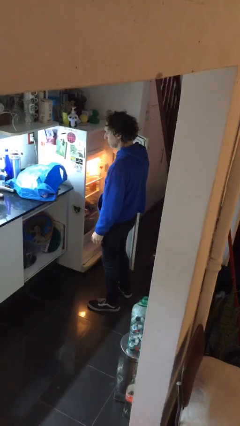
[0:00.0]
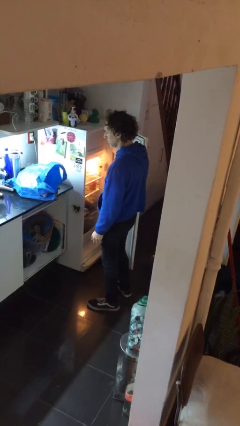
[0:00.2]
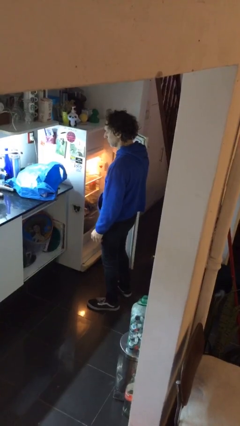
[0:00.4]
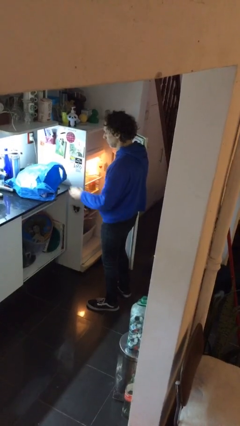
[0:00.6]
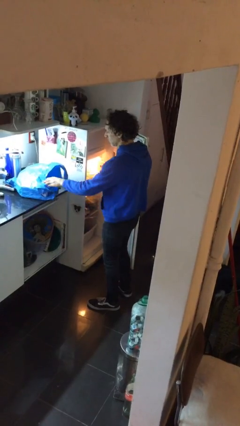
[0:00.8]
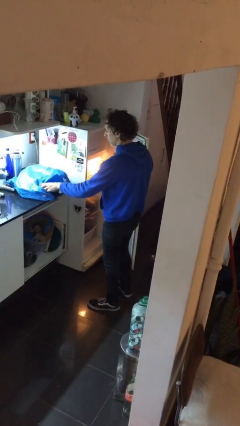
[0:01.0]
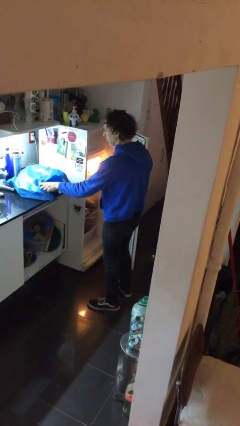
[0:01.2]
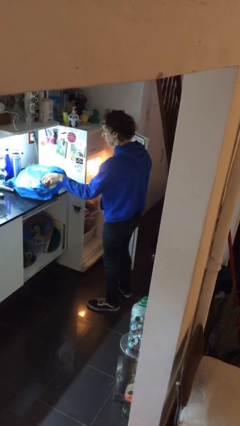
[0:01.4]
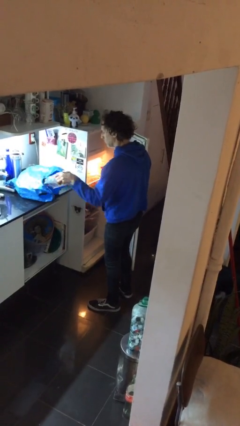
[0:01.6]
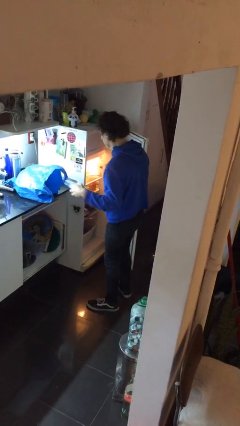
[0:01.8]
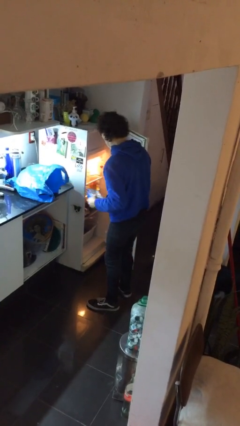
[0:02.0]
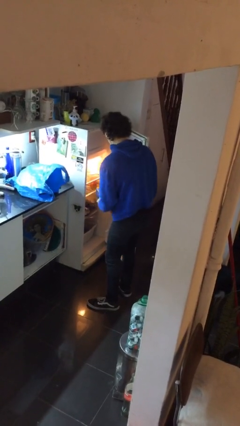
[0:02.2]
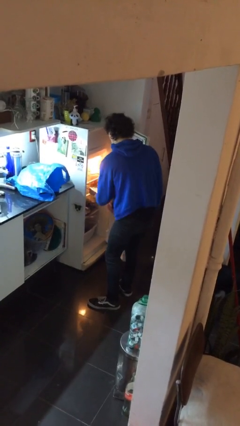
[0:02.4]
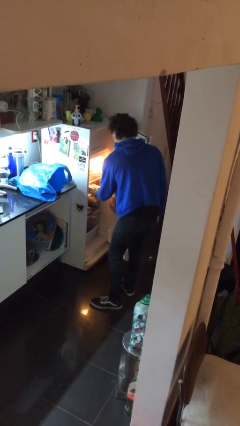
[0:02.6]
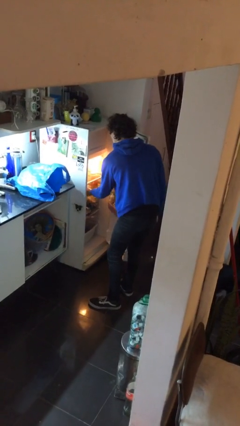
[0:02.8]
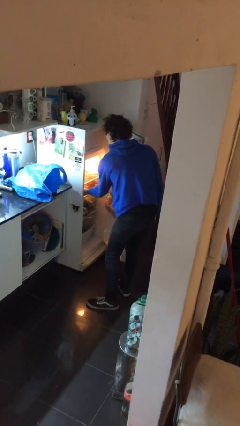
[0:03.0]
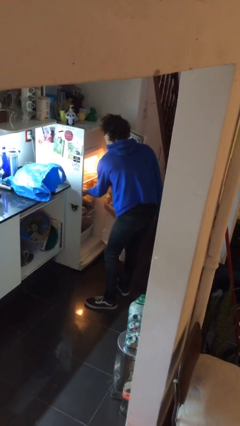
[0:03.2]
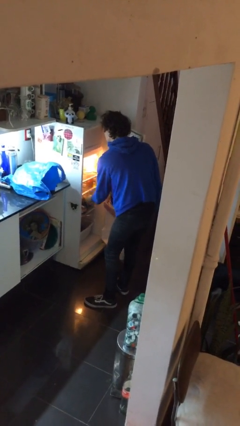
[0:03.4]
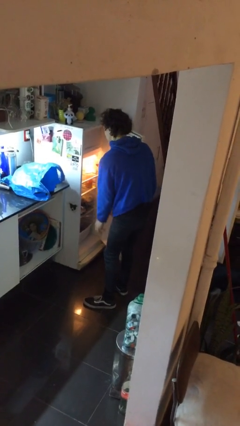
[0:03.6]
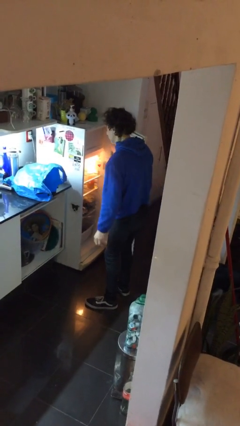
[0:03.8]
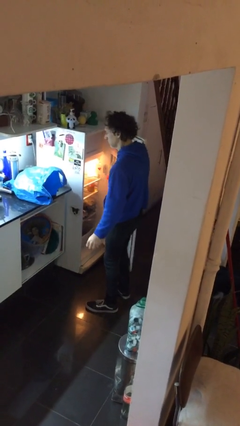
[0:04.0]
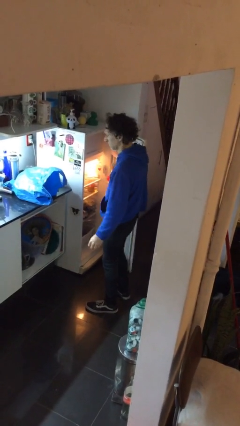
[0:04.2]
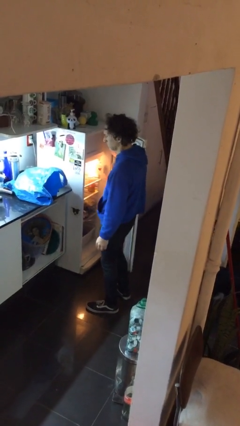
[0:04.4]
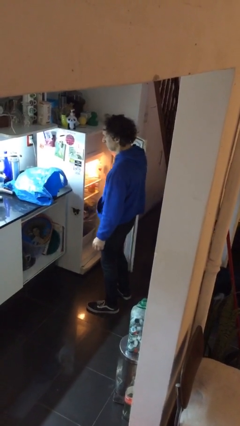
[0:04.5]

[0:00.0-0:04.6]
person loads groceries into refrigerator

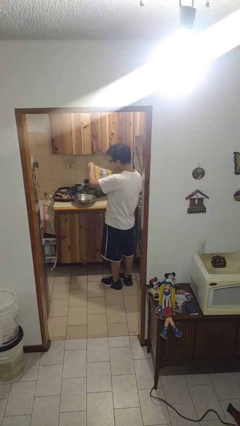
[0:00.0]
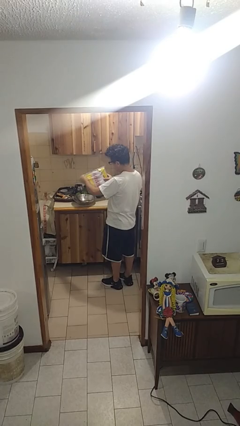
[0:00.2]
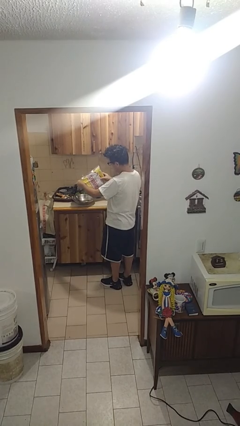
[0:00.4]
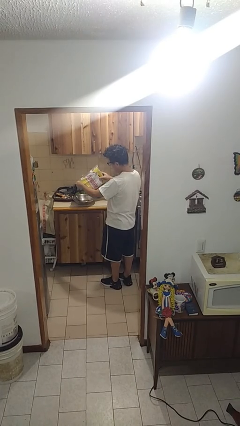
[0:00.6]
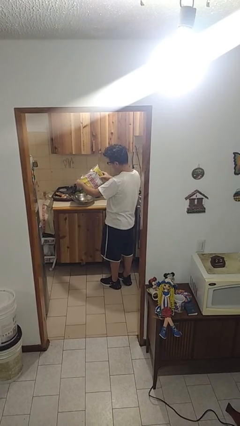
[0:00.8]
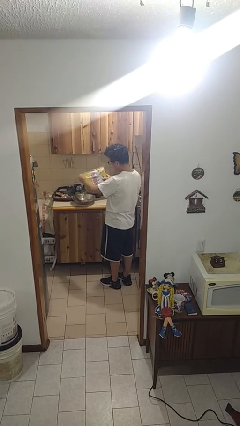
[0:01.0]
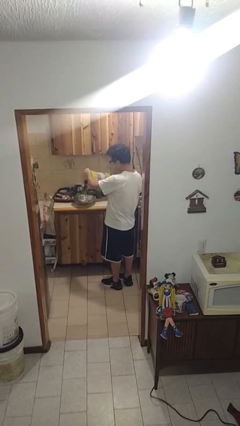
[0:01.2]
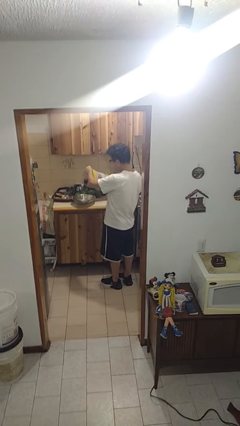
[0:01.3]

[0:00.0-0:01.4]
person pours into bowl

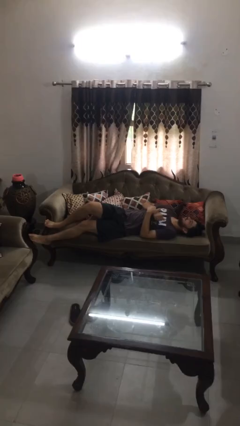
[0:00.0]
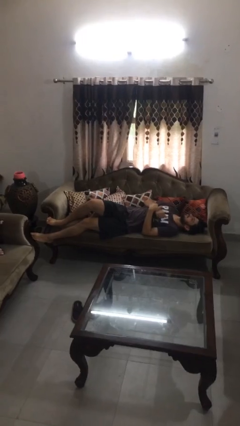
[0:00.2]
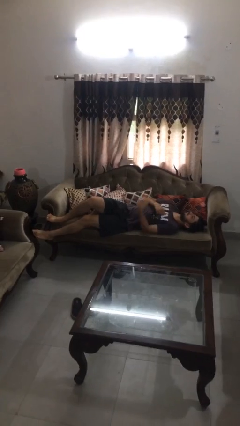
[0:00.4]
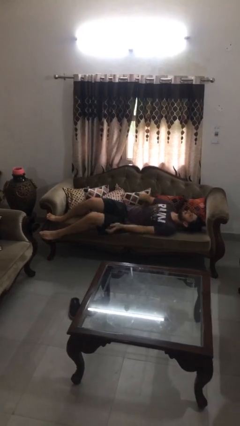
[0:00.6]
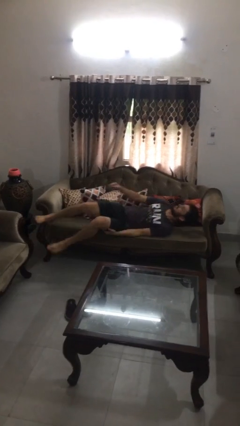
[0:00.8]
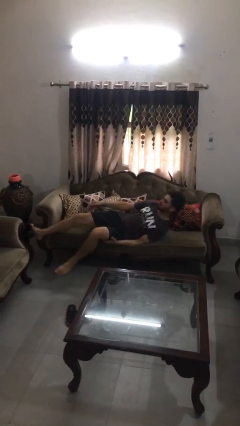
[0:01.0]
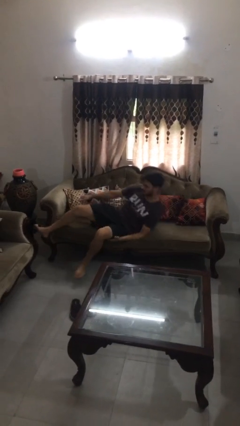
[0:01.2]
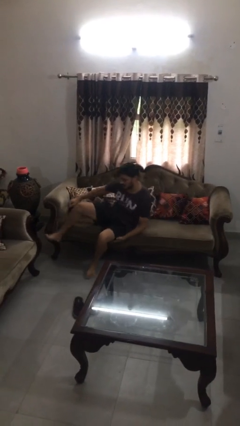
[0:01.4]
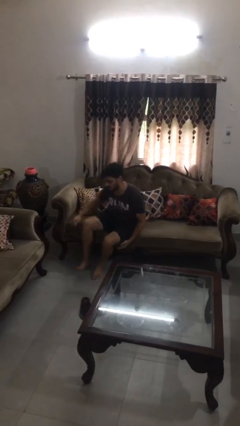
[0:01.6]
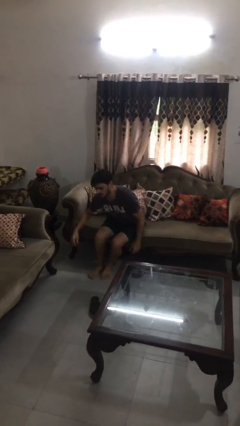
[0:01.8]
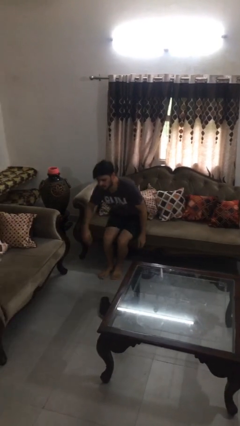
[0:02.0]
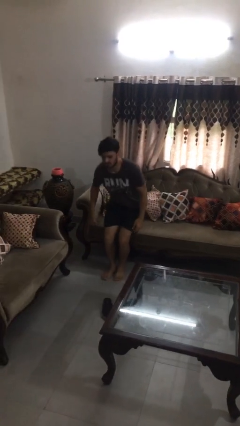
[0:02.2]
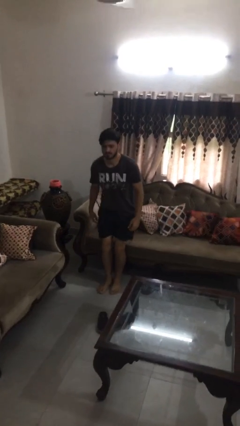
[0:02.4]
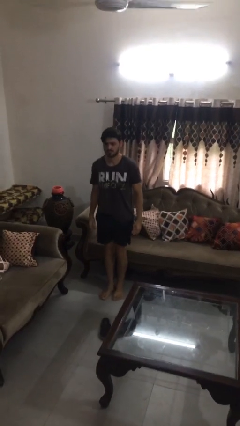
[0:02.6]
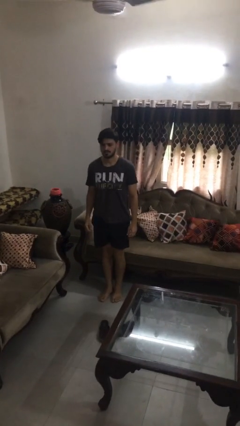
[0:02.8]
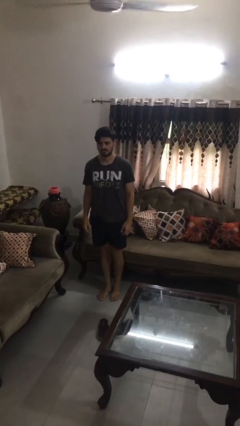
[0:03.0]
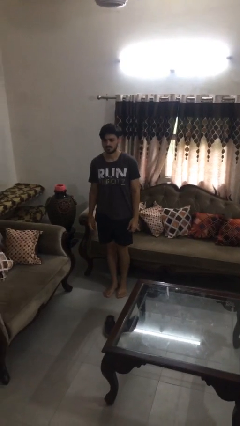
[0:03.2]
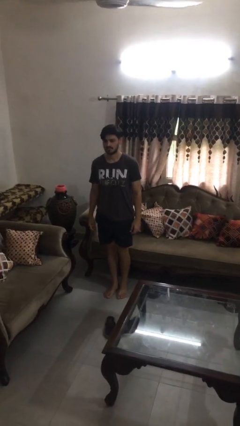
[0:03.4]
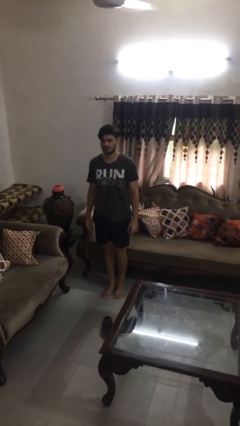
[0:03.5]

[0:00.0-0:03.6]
person stands up

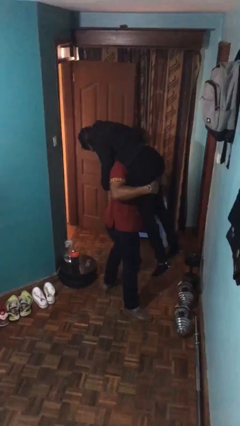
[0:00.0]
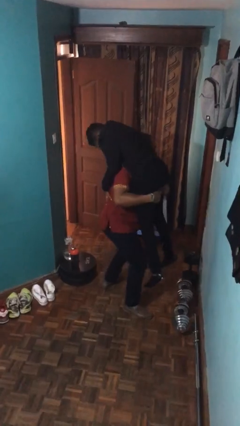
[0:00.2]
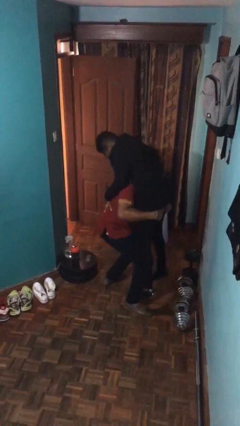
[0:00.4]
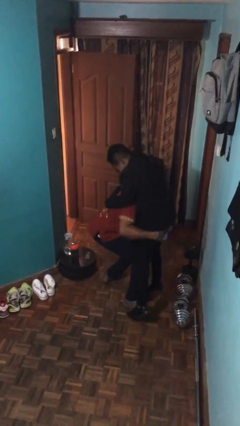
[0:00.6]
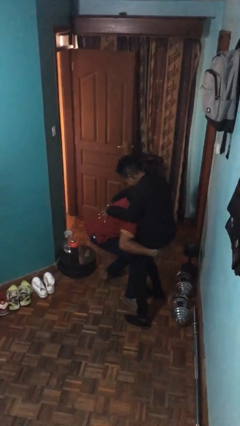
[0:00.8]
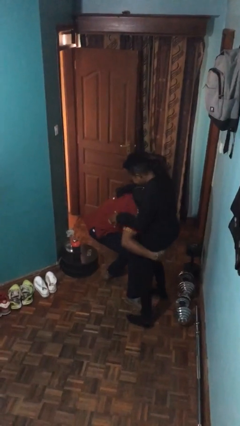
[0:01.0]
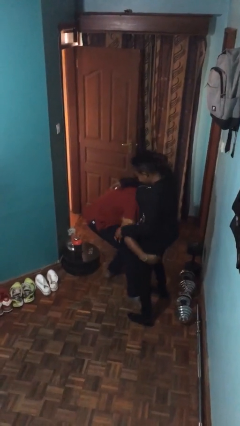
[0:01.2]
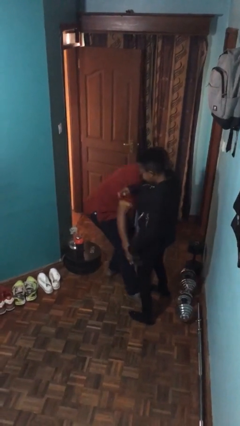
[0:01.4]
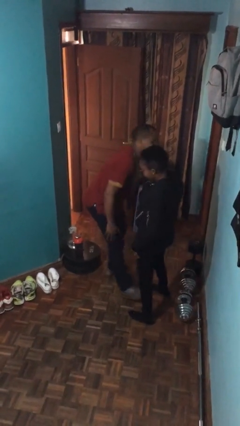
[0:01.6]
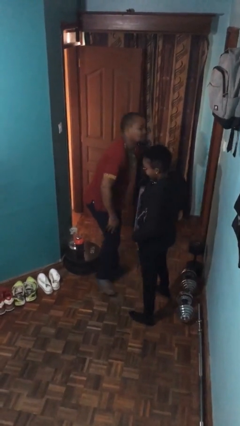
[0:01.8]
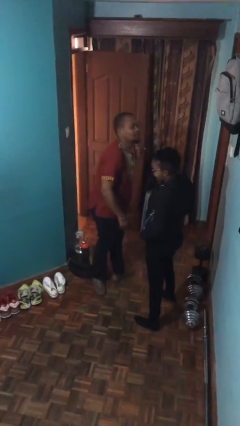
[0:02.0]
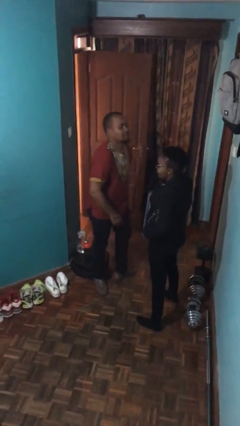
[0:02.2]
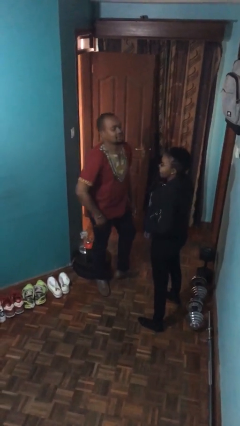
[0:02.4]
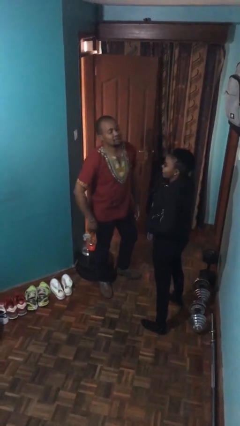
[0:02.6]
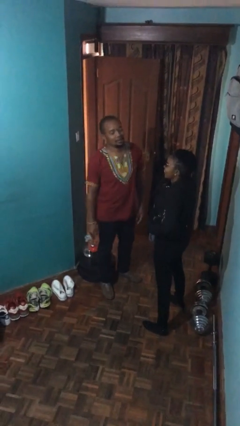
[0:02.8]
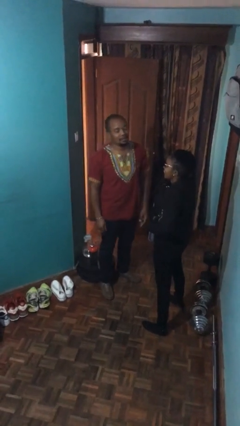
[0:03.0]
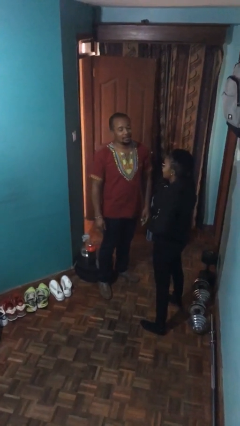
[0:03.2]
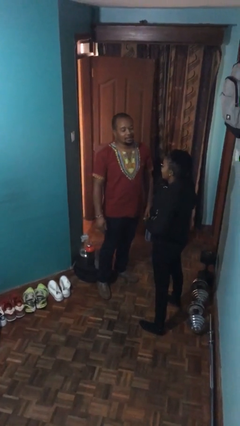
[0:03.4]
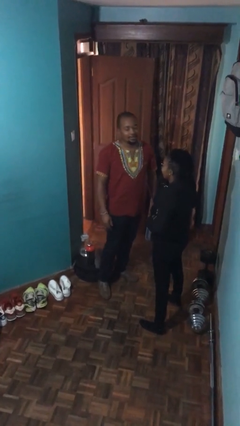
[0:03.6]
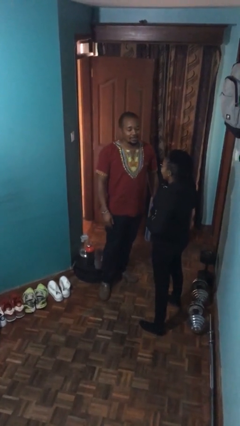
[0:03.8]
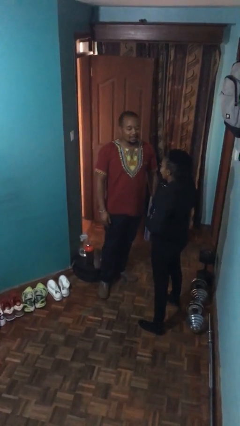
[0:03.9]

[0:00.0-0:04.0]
person puts down person

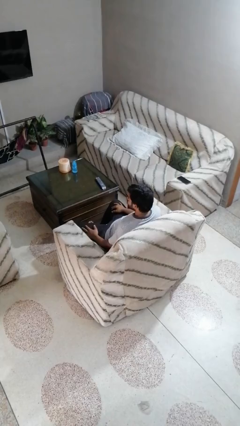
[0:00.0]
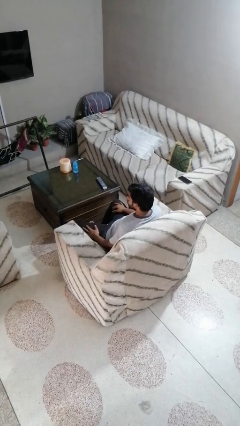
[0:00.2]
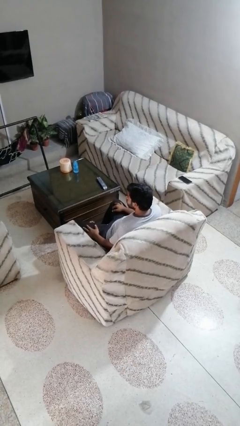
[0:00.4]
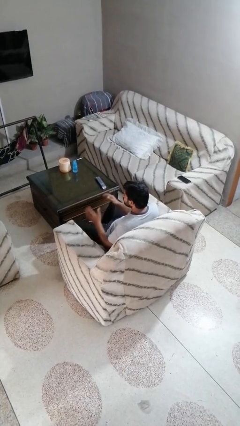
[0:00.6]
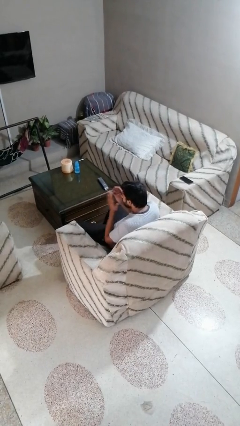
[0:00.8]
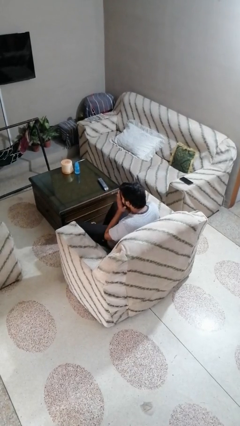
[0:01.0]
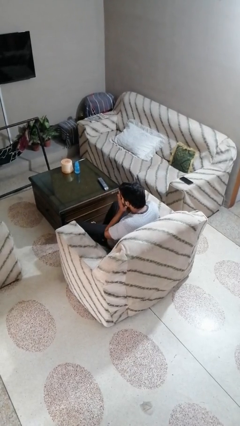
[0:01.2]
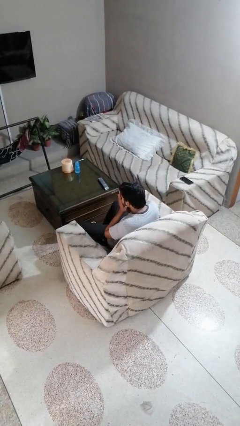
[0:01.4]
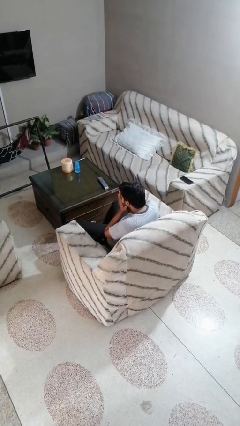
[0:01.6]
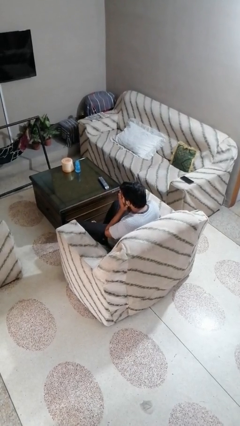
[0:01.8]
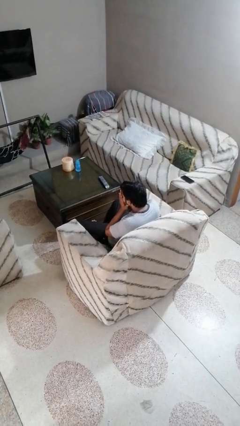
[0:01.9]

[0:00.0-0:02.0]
person covers face with hands

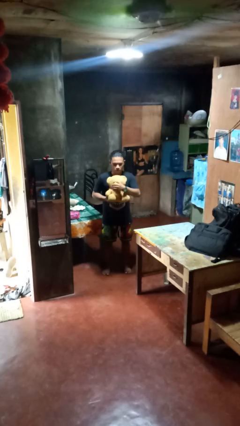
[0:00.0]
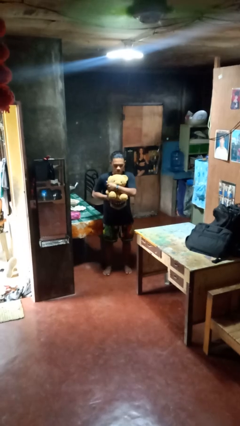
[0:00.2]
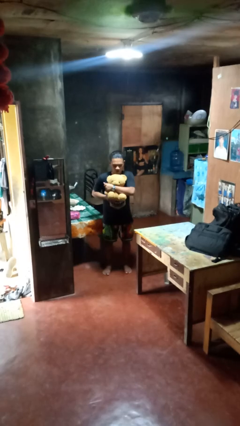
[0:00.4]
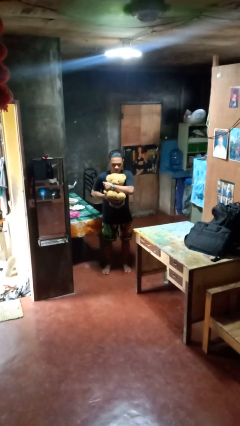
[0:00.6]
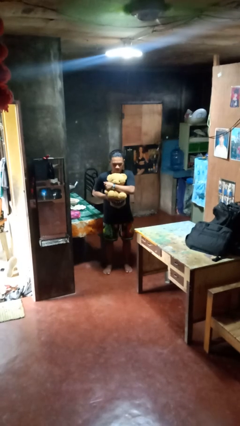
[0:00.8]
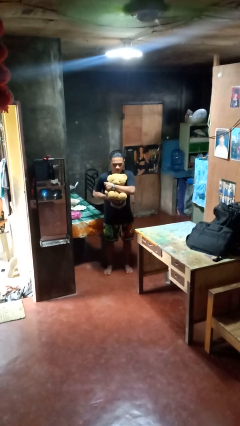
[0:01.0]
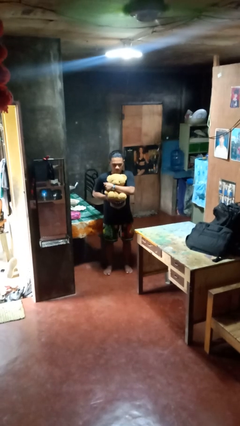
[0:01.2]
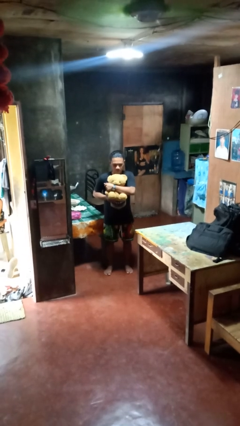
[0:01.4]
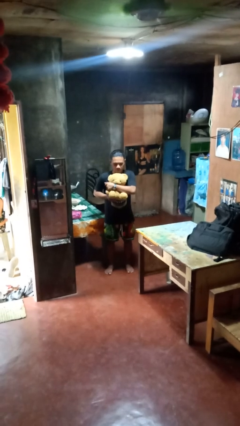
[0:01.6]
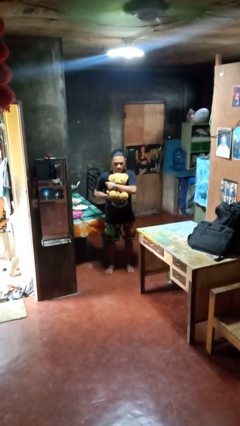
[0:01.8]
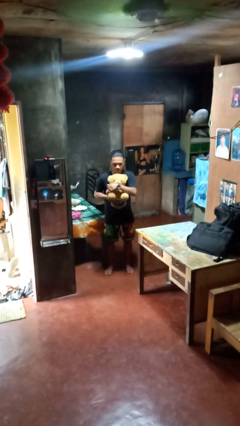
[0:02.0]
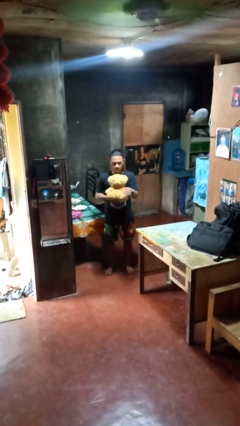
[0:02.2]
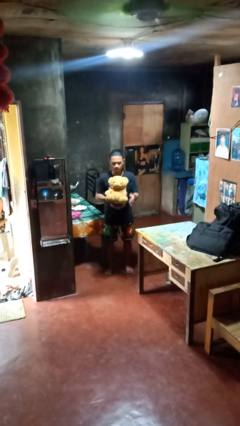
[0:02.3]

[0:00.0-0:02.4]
person hugs stuffed animal
